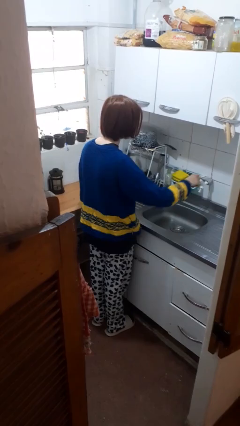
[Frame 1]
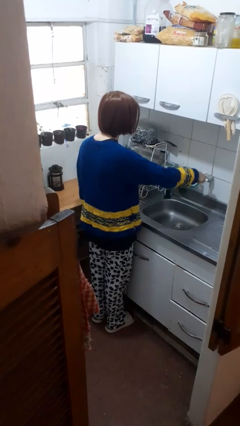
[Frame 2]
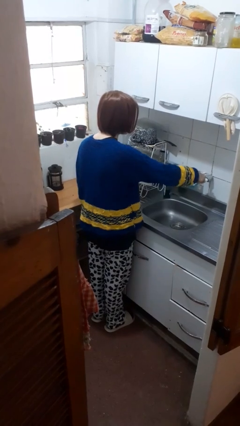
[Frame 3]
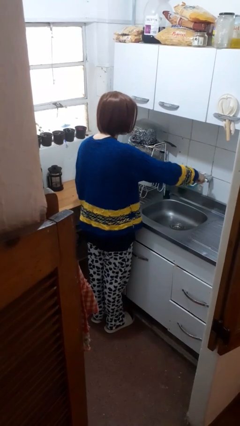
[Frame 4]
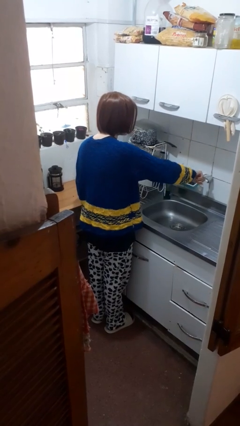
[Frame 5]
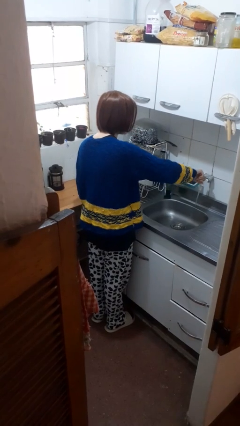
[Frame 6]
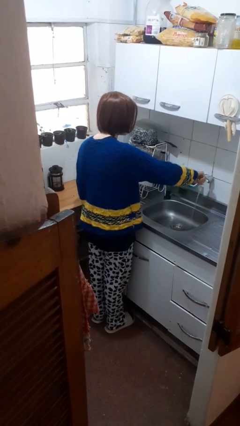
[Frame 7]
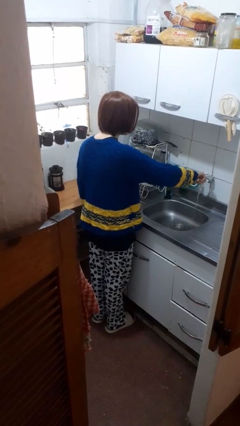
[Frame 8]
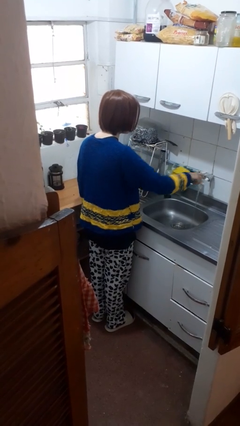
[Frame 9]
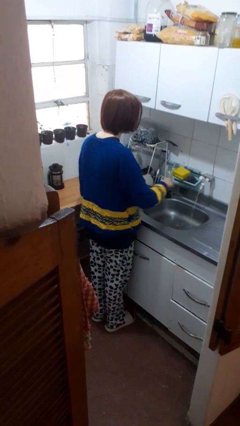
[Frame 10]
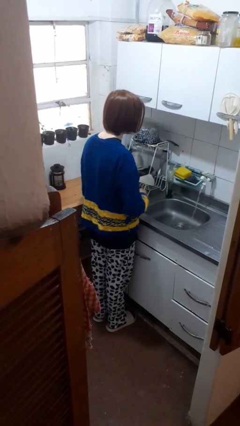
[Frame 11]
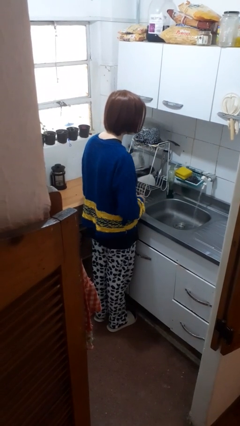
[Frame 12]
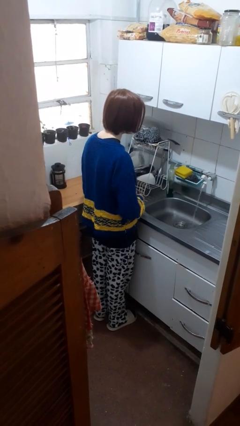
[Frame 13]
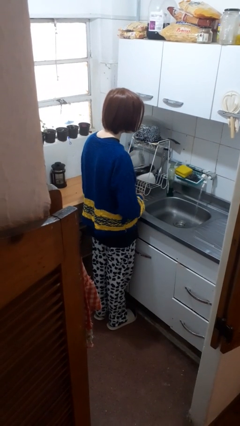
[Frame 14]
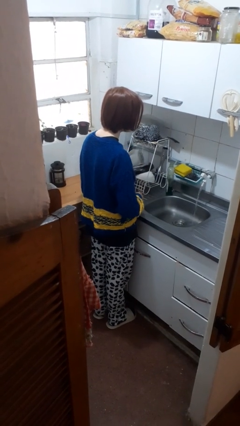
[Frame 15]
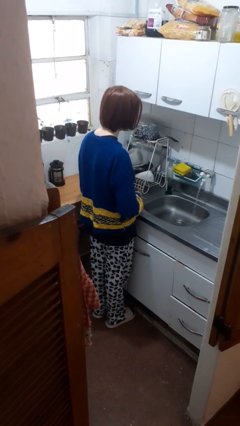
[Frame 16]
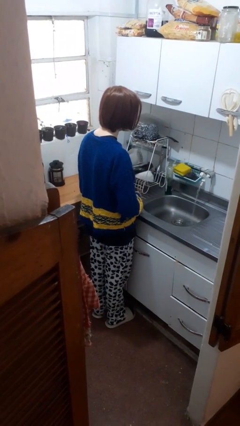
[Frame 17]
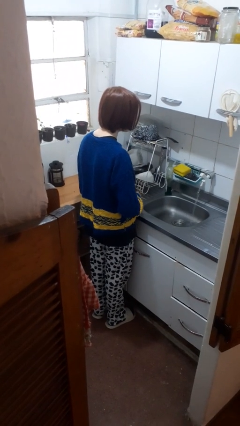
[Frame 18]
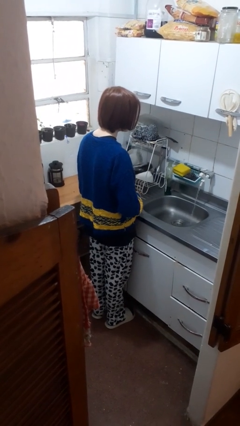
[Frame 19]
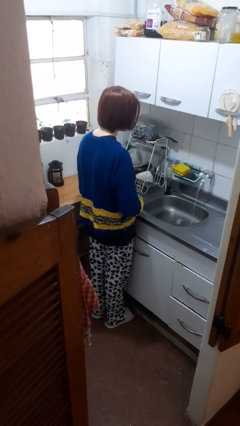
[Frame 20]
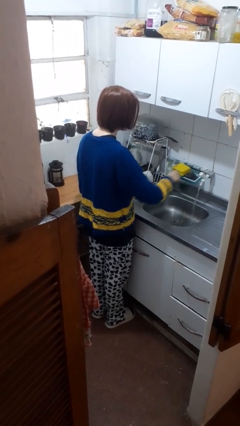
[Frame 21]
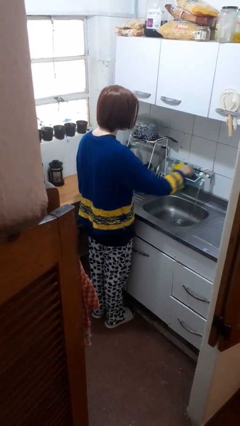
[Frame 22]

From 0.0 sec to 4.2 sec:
person turns on faucet

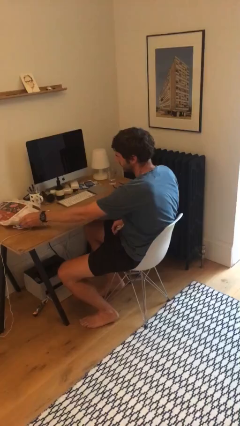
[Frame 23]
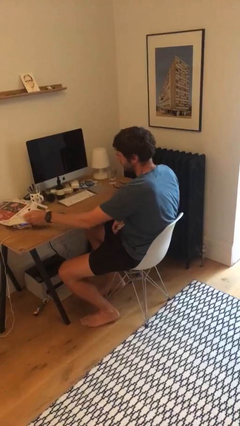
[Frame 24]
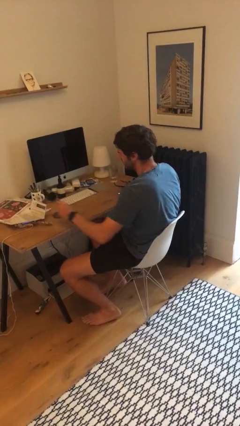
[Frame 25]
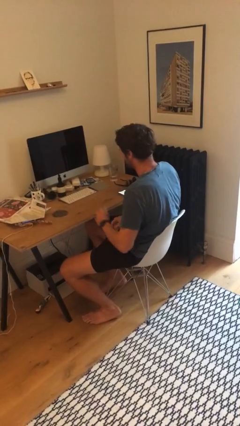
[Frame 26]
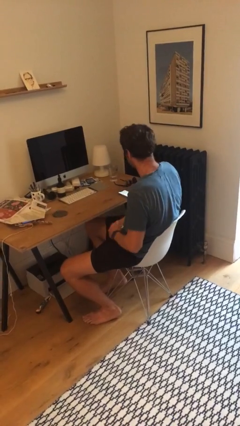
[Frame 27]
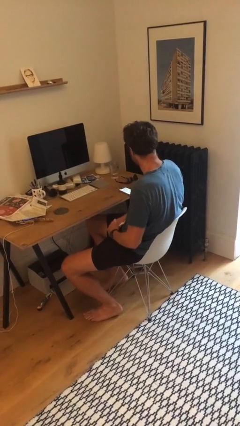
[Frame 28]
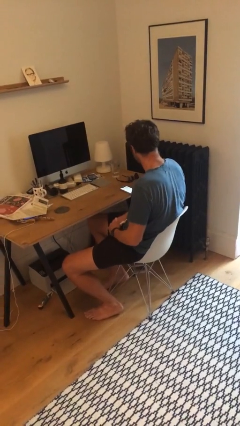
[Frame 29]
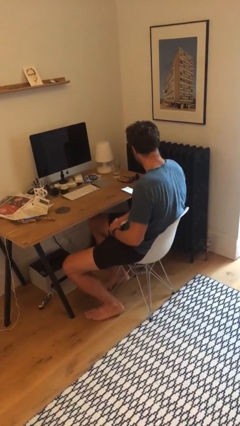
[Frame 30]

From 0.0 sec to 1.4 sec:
person puts down object on table

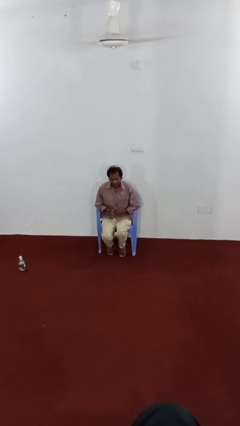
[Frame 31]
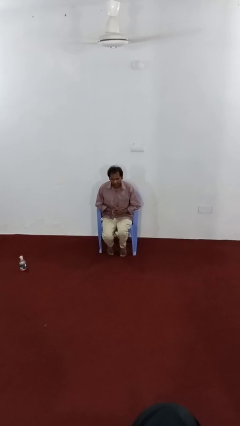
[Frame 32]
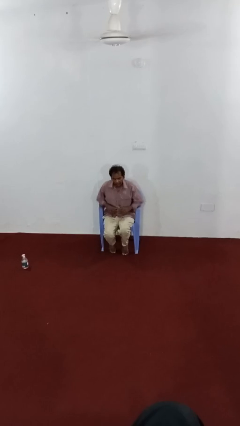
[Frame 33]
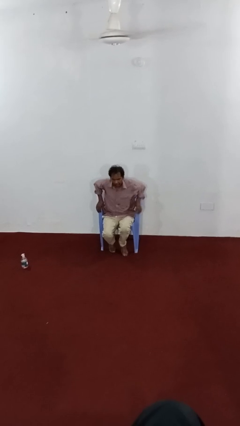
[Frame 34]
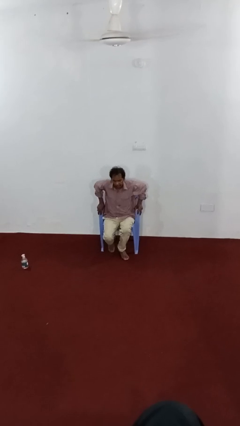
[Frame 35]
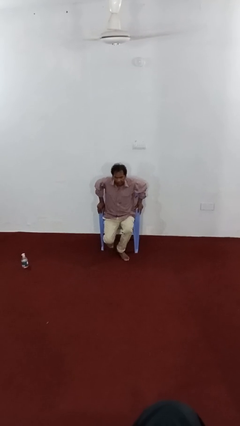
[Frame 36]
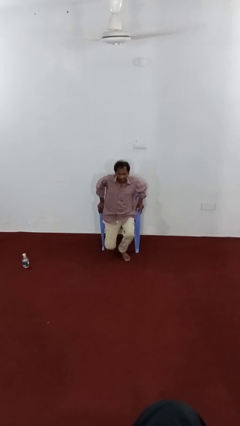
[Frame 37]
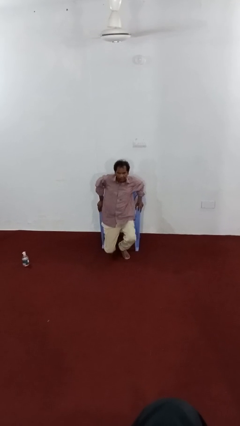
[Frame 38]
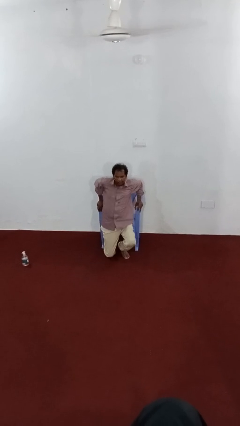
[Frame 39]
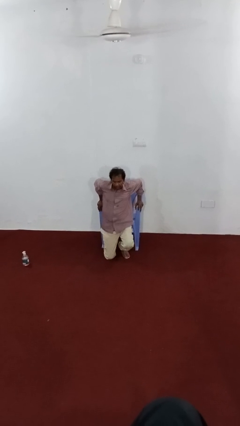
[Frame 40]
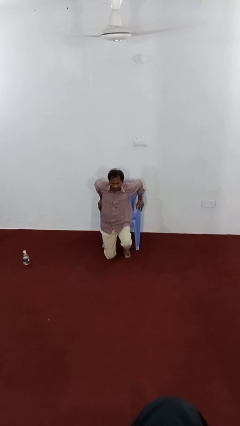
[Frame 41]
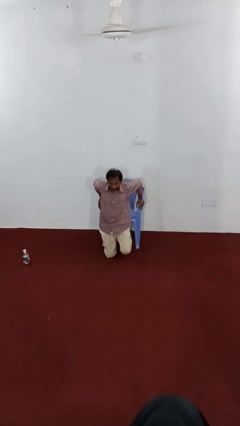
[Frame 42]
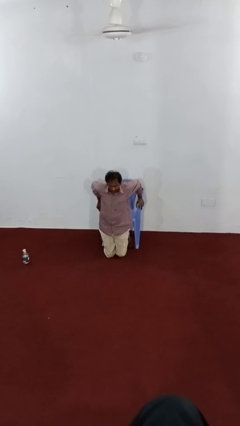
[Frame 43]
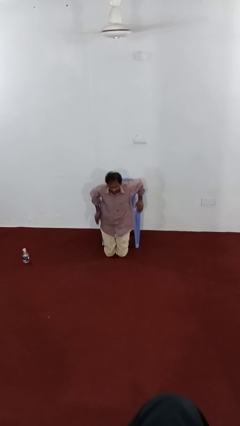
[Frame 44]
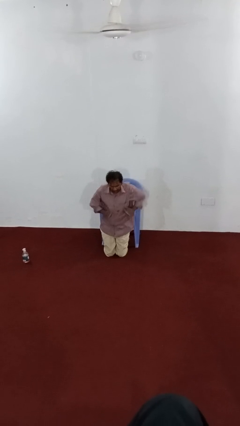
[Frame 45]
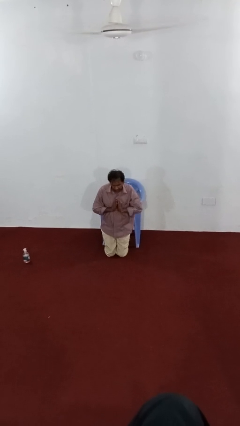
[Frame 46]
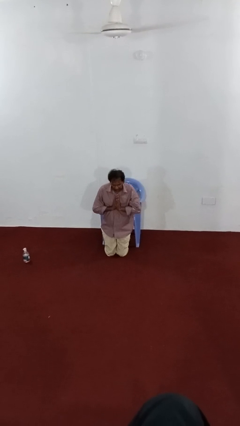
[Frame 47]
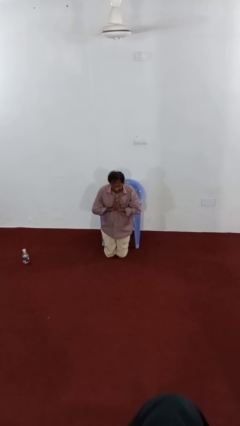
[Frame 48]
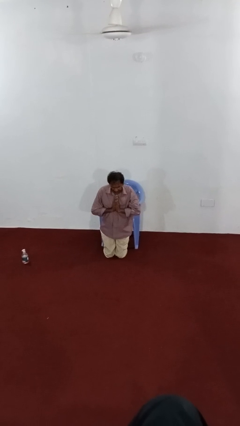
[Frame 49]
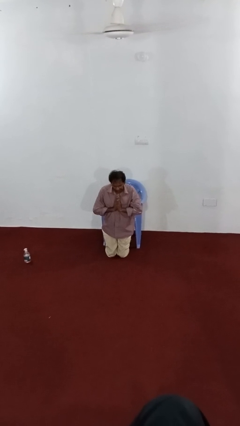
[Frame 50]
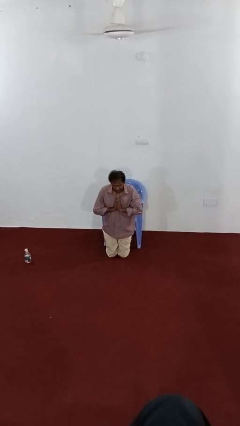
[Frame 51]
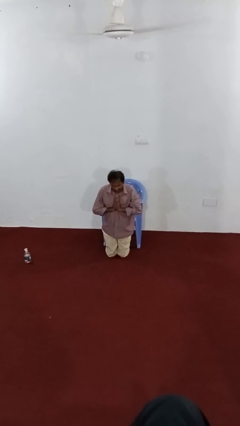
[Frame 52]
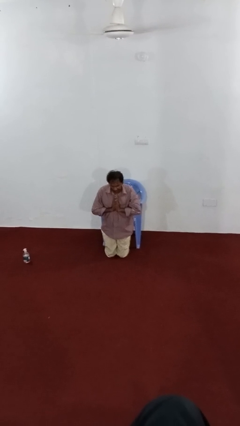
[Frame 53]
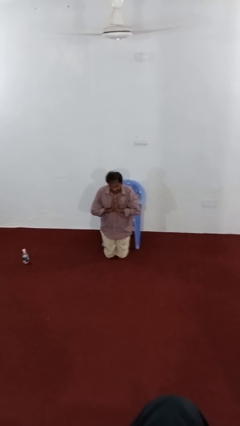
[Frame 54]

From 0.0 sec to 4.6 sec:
person prays

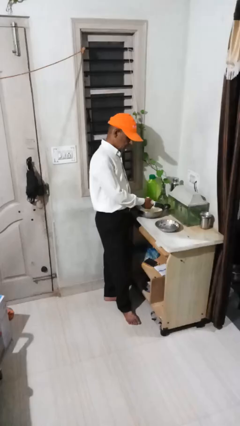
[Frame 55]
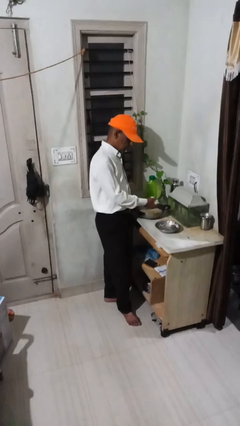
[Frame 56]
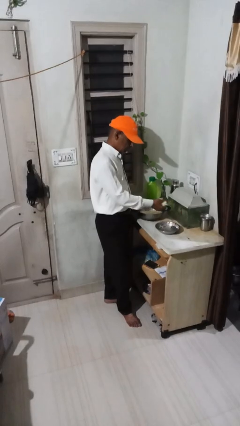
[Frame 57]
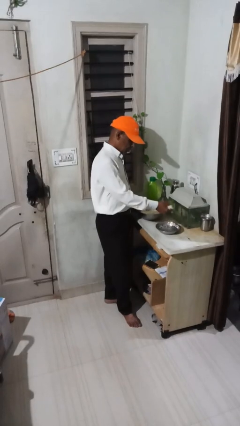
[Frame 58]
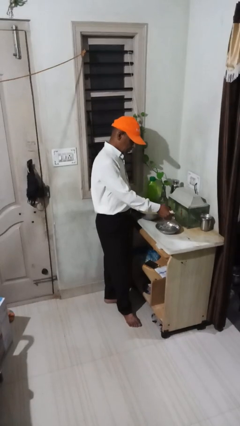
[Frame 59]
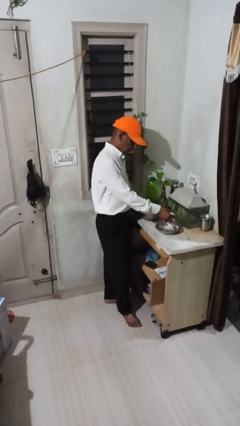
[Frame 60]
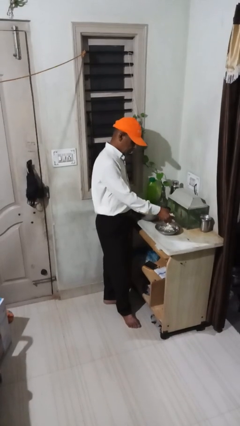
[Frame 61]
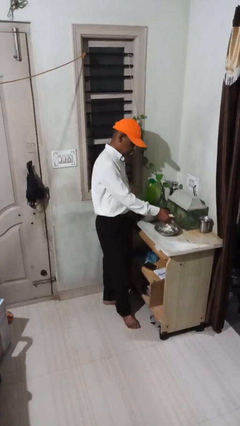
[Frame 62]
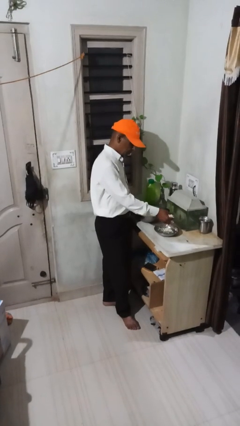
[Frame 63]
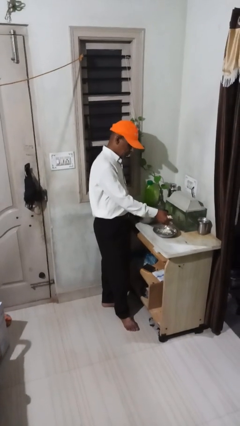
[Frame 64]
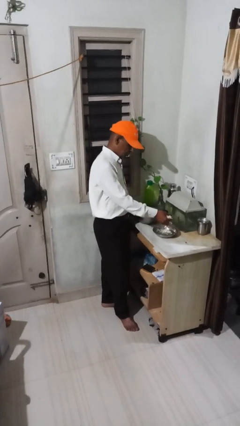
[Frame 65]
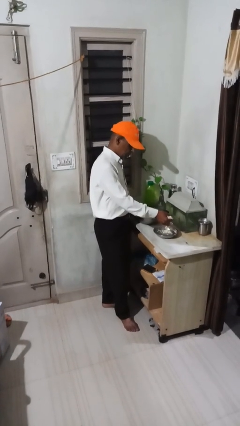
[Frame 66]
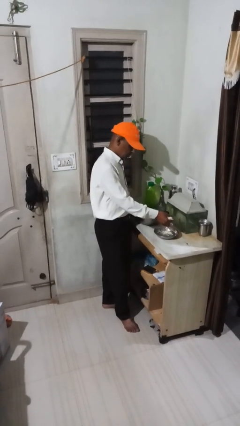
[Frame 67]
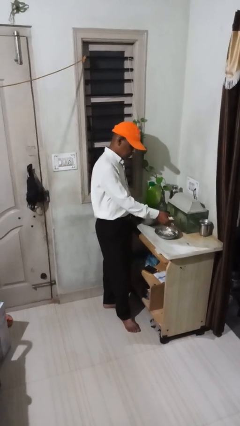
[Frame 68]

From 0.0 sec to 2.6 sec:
person pours into bowl

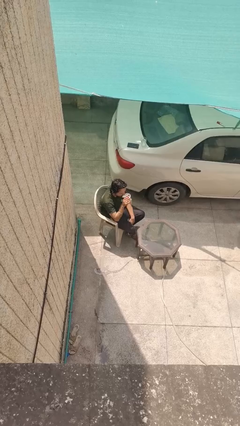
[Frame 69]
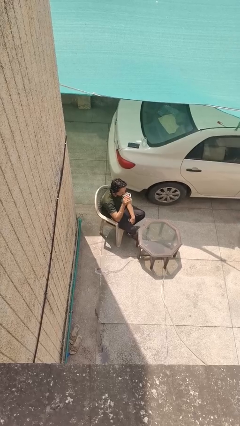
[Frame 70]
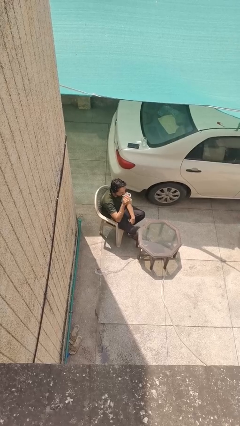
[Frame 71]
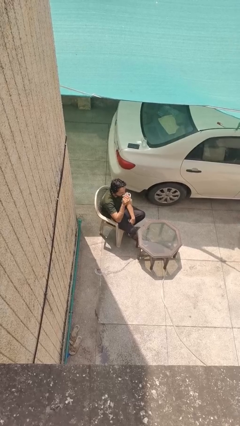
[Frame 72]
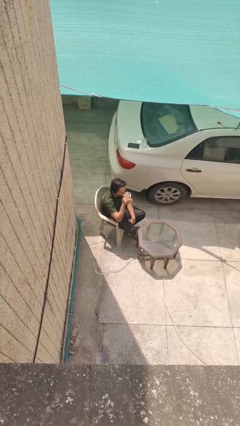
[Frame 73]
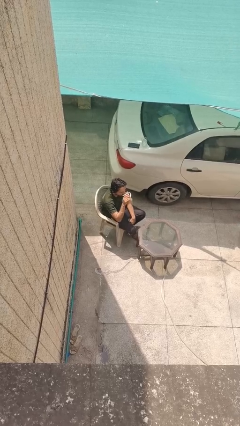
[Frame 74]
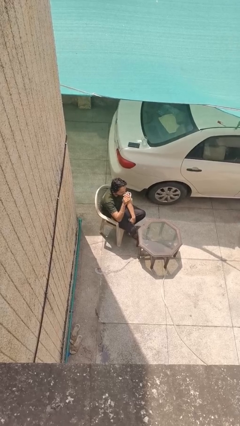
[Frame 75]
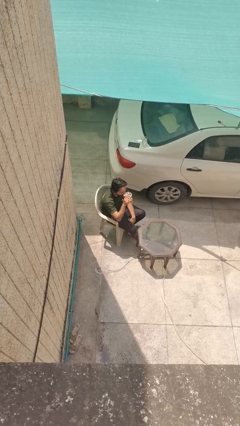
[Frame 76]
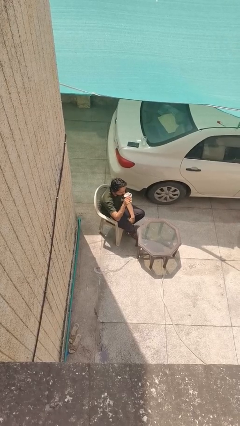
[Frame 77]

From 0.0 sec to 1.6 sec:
person drinks from mug

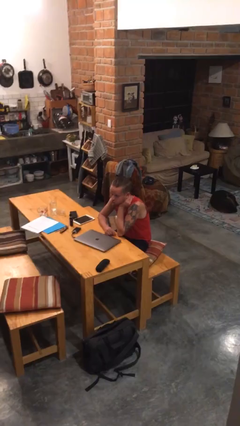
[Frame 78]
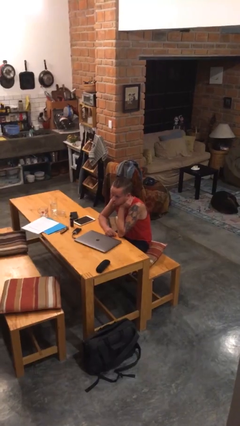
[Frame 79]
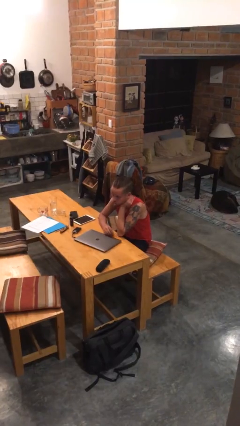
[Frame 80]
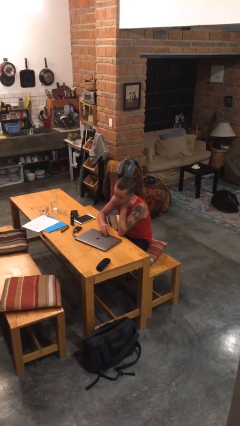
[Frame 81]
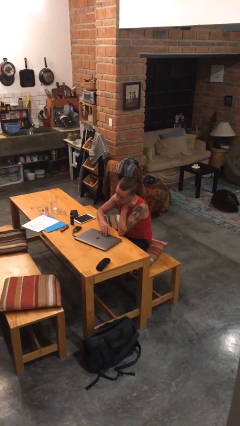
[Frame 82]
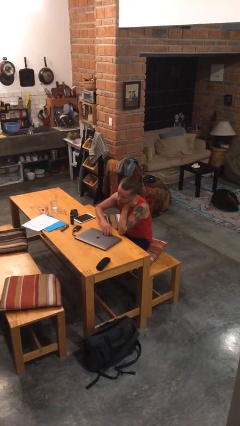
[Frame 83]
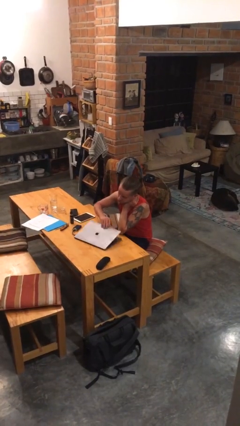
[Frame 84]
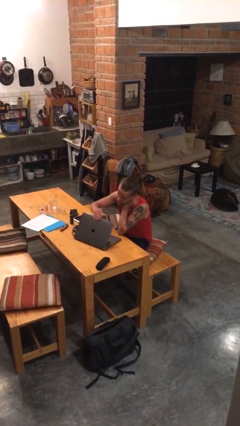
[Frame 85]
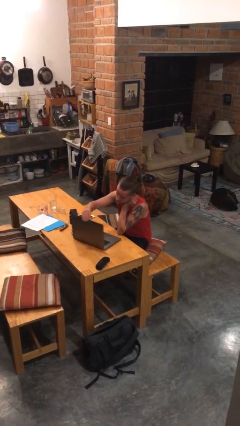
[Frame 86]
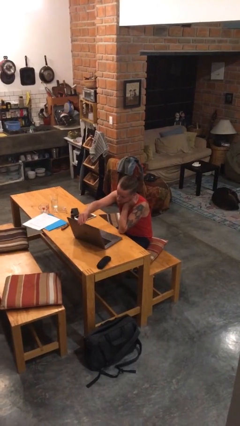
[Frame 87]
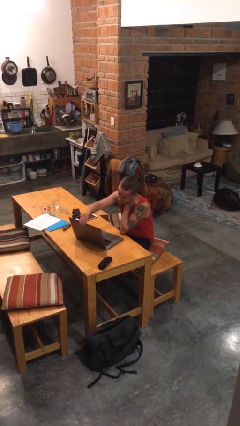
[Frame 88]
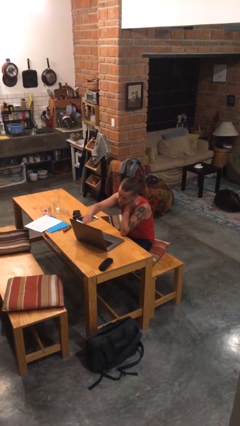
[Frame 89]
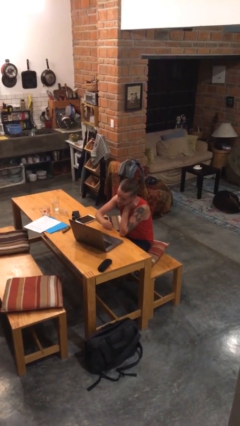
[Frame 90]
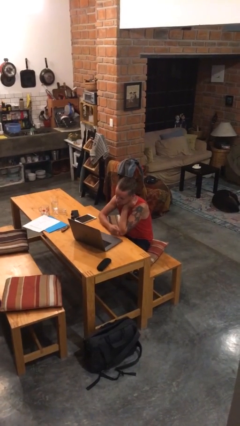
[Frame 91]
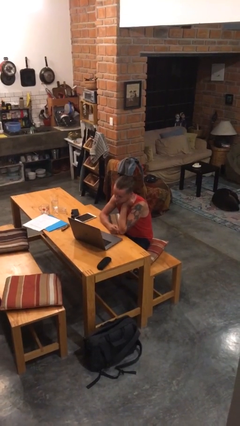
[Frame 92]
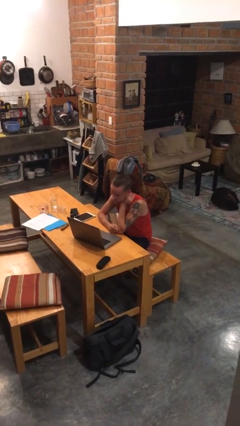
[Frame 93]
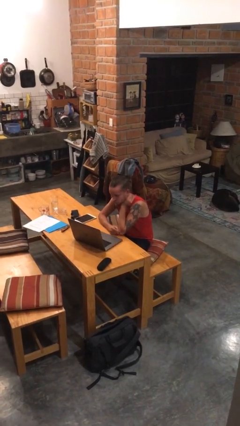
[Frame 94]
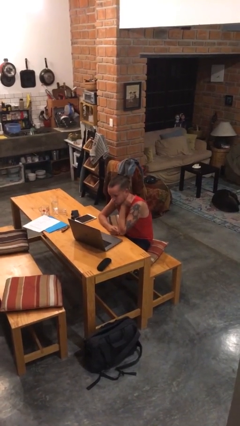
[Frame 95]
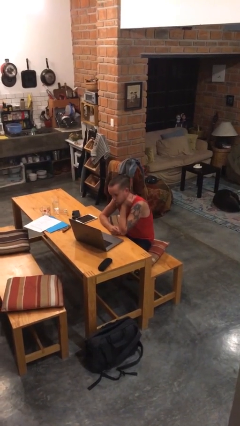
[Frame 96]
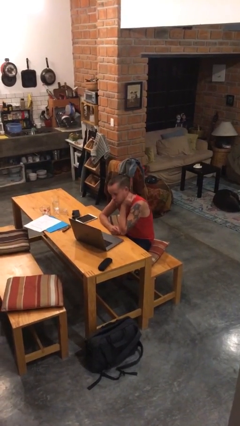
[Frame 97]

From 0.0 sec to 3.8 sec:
person opens laptop
